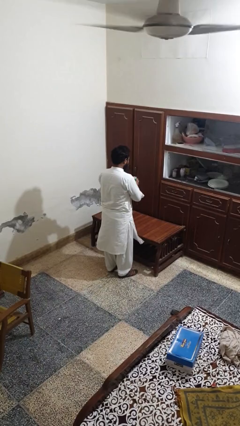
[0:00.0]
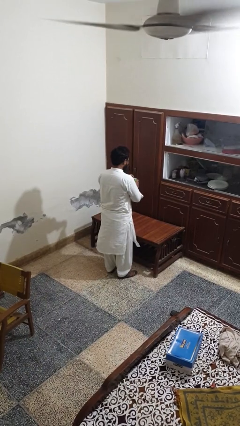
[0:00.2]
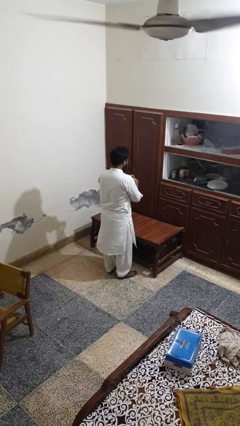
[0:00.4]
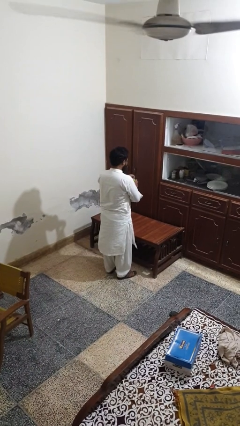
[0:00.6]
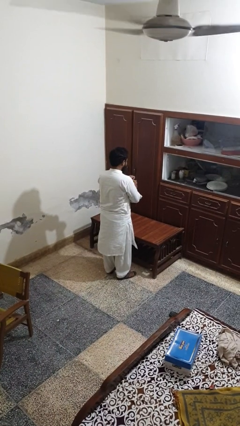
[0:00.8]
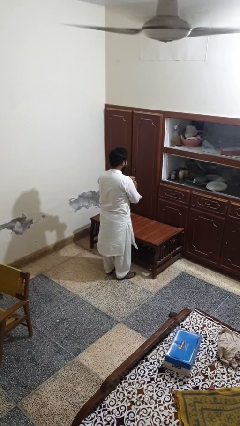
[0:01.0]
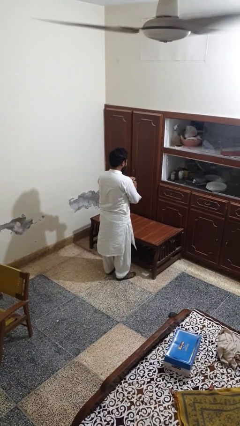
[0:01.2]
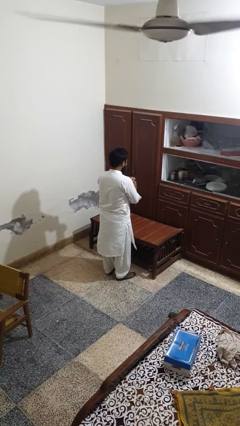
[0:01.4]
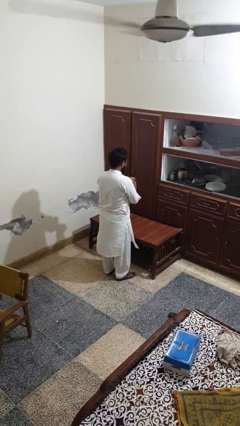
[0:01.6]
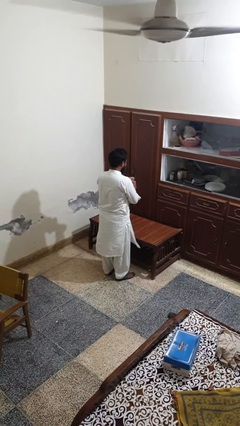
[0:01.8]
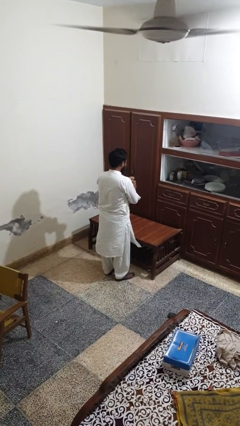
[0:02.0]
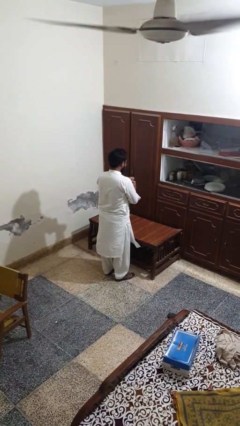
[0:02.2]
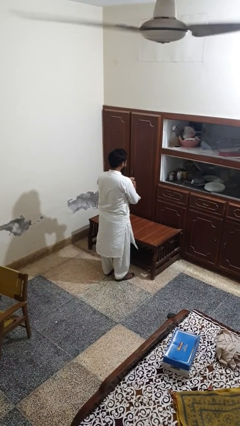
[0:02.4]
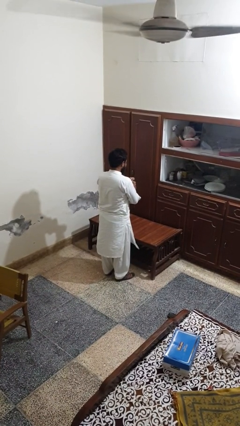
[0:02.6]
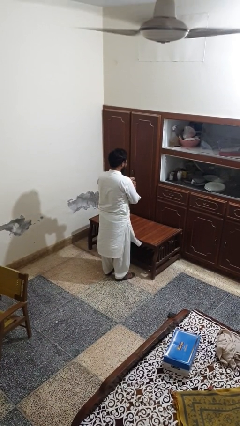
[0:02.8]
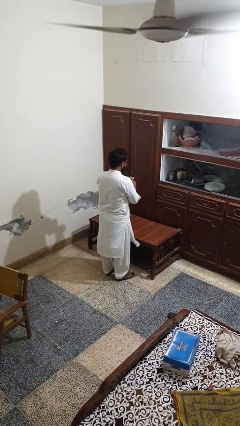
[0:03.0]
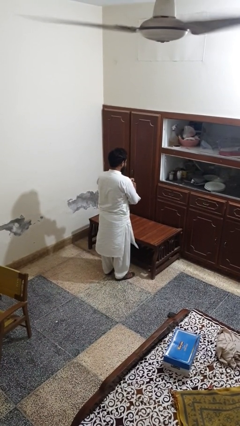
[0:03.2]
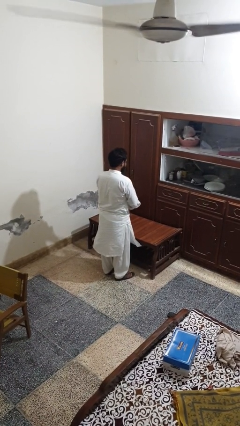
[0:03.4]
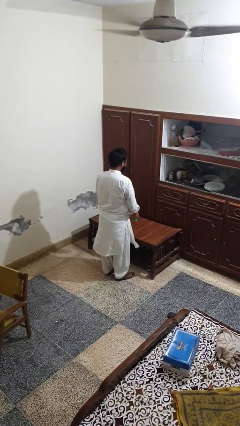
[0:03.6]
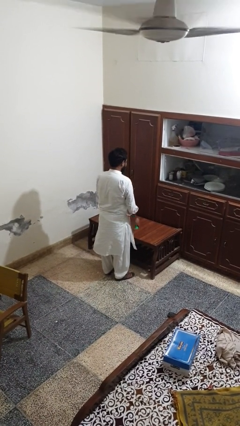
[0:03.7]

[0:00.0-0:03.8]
person opens beverage can

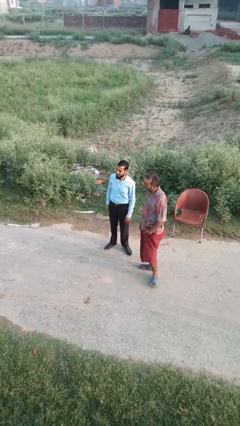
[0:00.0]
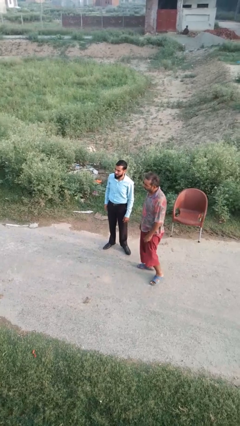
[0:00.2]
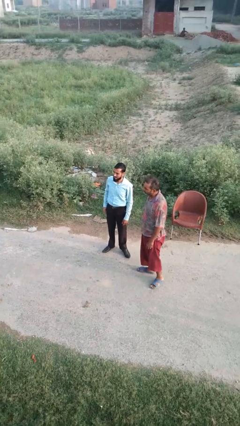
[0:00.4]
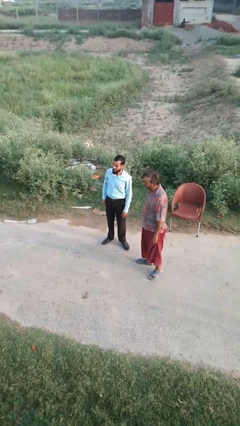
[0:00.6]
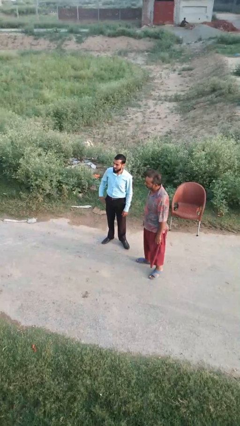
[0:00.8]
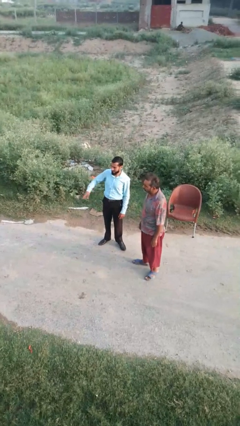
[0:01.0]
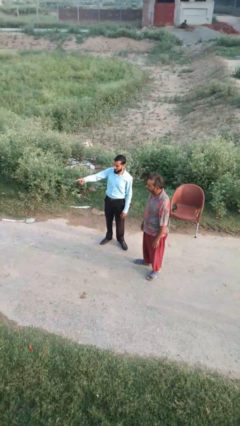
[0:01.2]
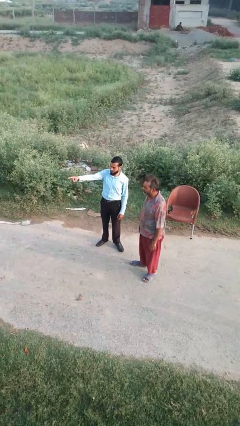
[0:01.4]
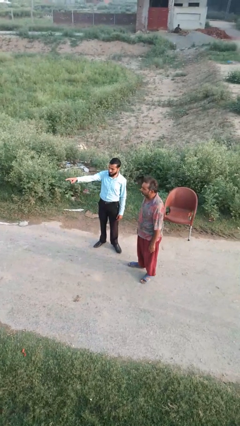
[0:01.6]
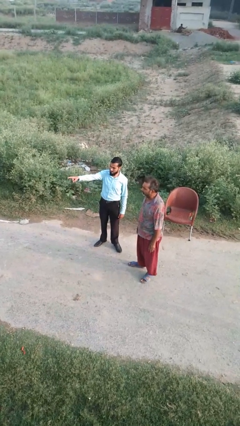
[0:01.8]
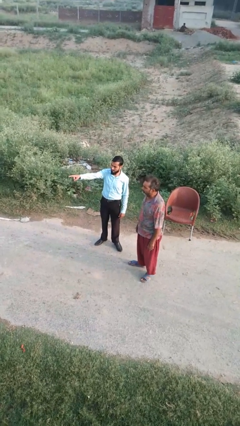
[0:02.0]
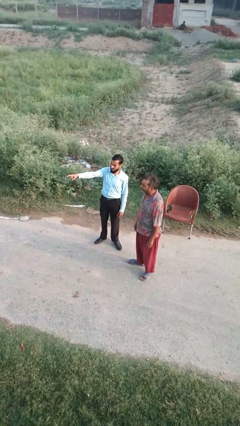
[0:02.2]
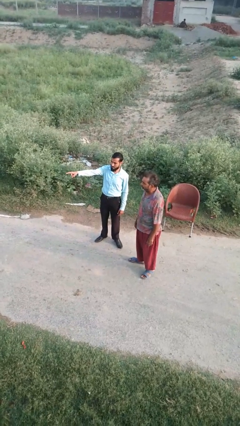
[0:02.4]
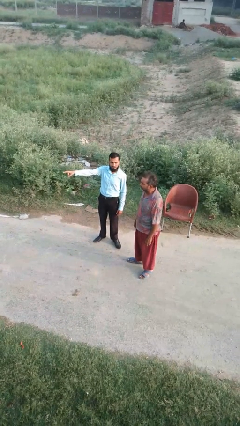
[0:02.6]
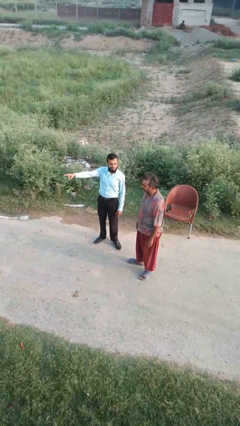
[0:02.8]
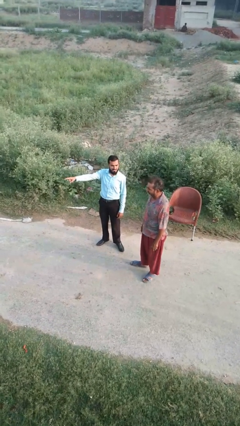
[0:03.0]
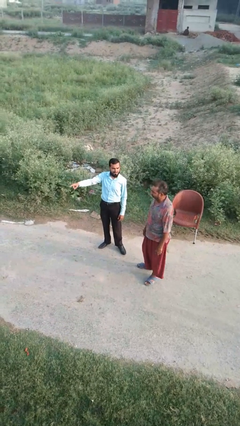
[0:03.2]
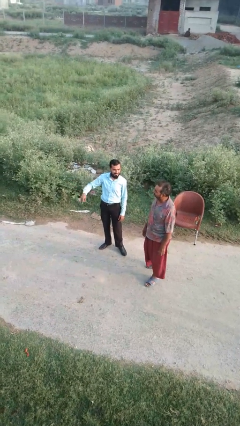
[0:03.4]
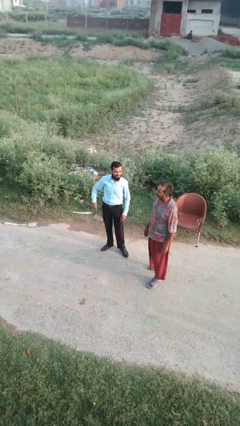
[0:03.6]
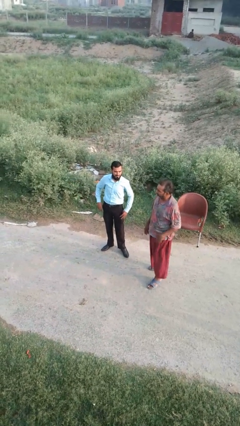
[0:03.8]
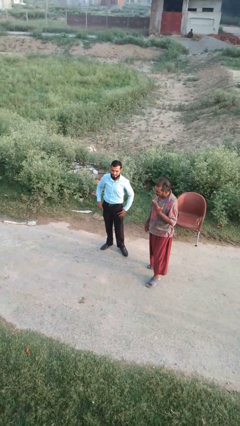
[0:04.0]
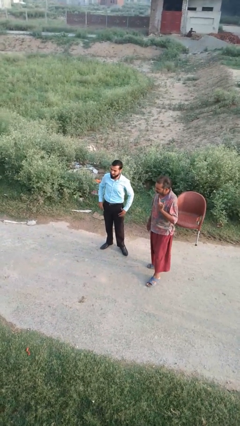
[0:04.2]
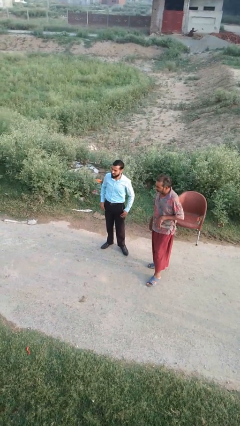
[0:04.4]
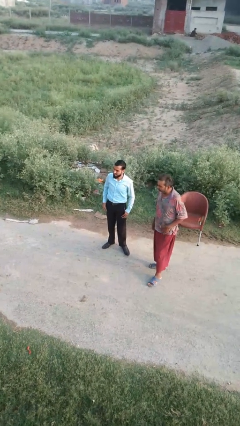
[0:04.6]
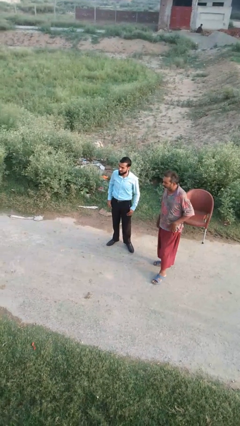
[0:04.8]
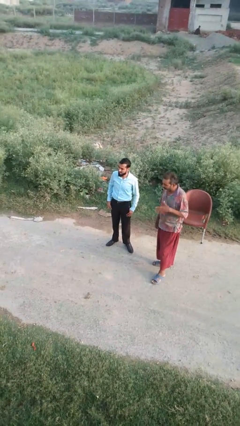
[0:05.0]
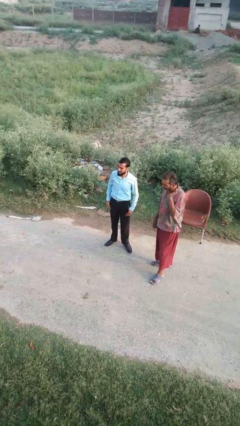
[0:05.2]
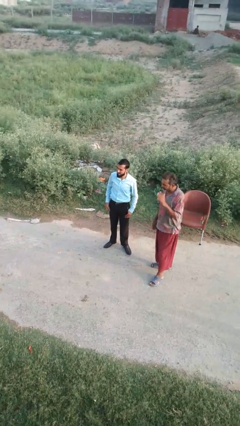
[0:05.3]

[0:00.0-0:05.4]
person points at person

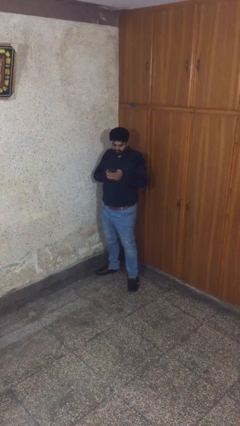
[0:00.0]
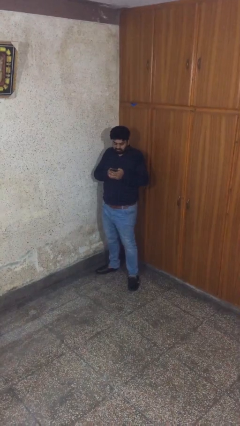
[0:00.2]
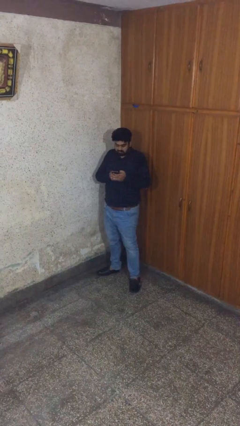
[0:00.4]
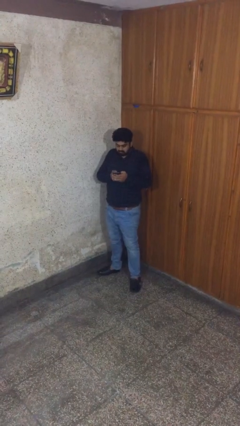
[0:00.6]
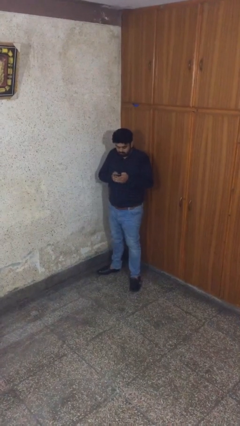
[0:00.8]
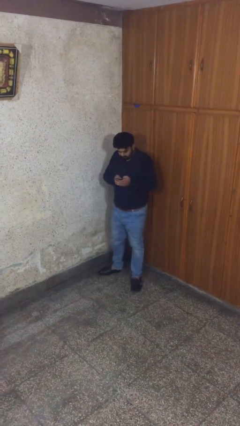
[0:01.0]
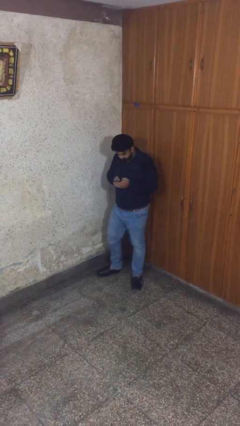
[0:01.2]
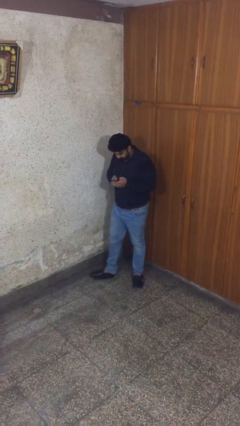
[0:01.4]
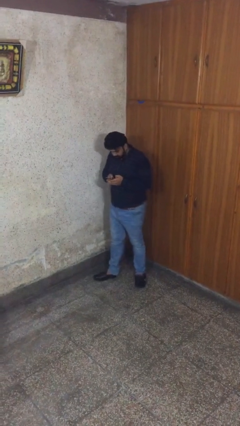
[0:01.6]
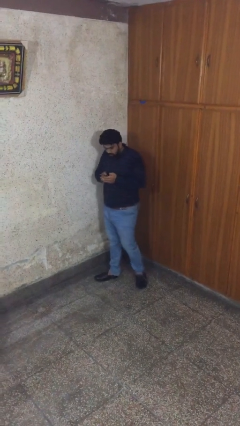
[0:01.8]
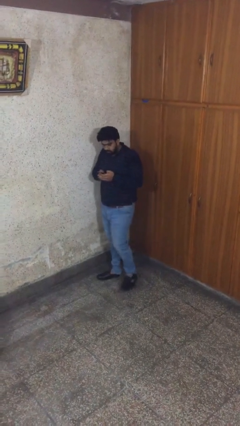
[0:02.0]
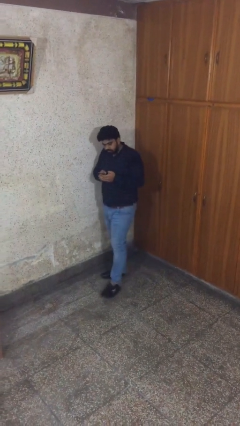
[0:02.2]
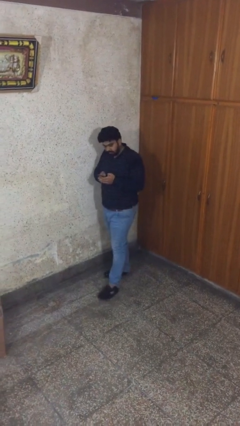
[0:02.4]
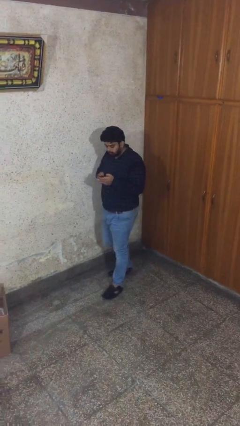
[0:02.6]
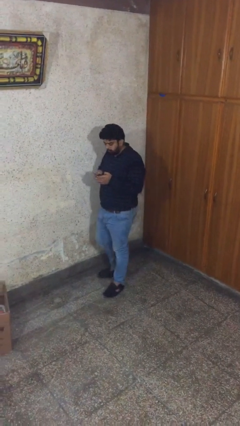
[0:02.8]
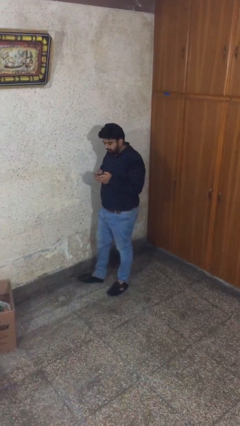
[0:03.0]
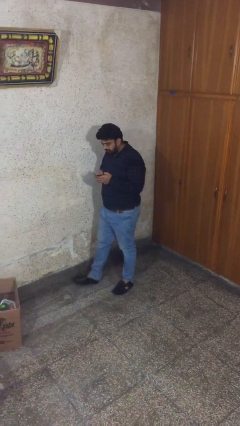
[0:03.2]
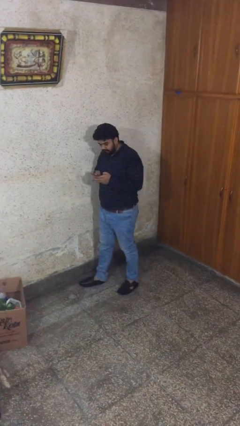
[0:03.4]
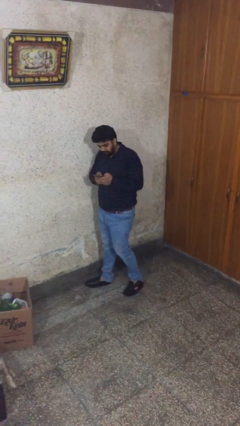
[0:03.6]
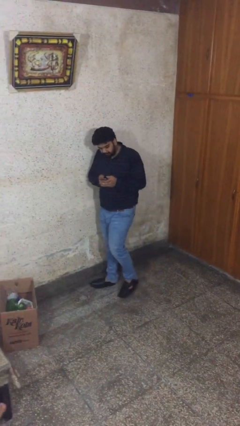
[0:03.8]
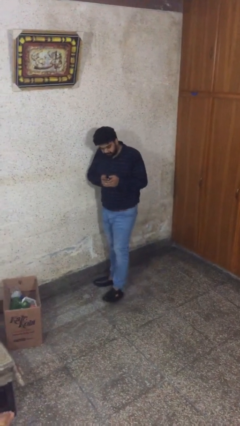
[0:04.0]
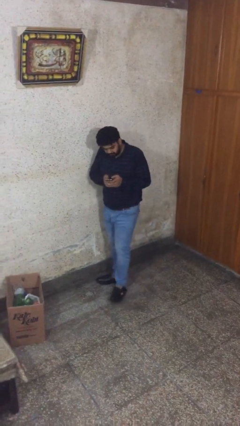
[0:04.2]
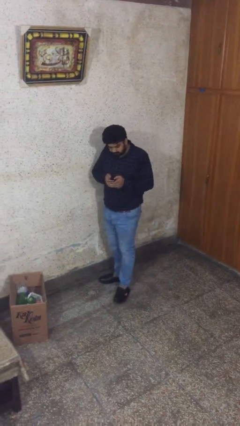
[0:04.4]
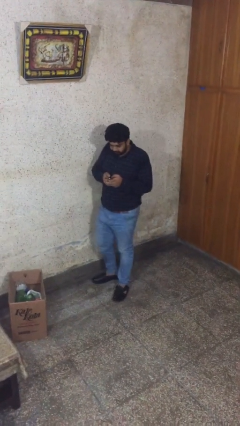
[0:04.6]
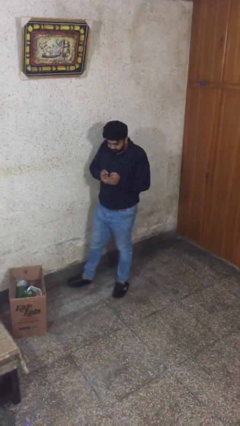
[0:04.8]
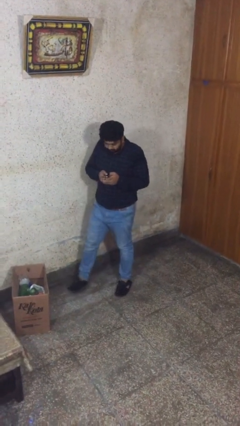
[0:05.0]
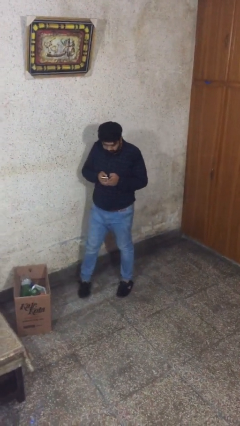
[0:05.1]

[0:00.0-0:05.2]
person texts on phone

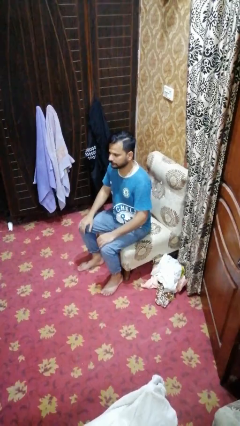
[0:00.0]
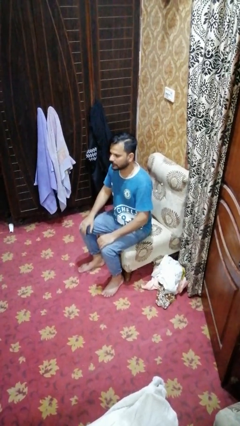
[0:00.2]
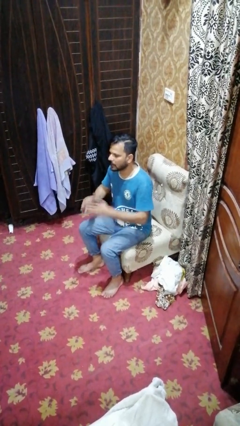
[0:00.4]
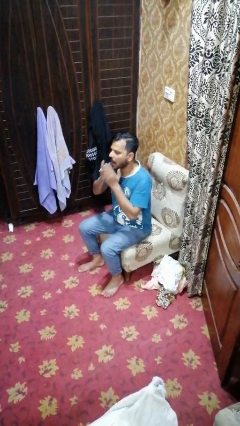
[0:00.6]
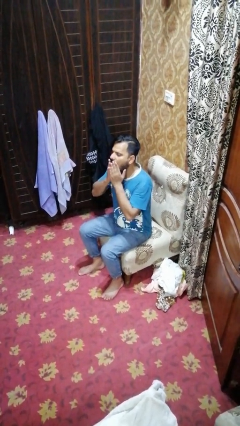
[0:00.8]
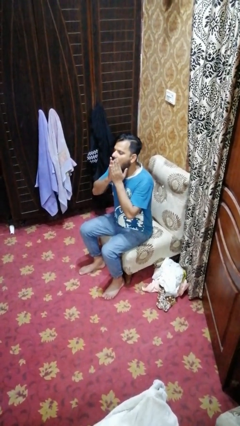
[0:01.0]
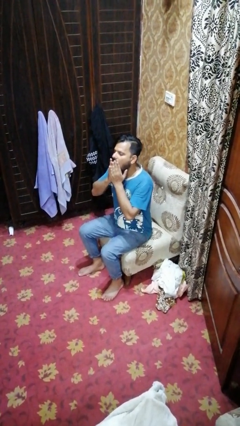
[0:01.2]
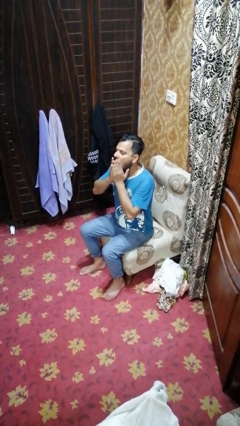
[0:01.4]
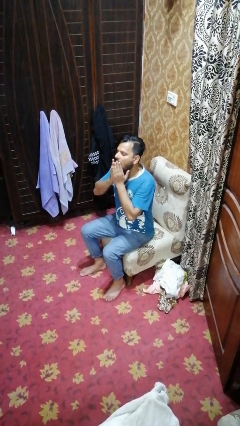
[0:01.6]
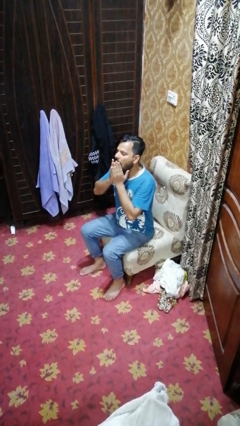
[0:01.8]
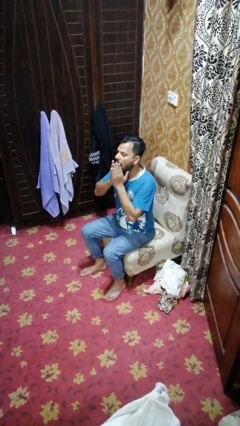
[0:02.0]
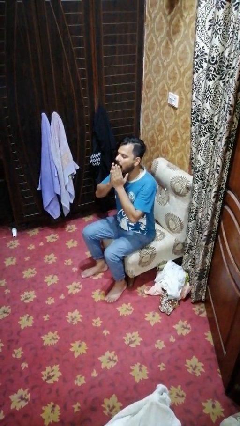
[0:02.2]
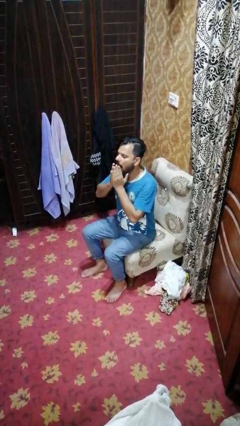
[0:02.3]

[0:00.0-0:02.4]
person yawns

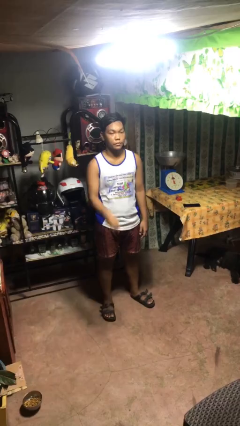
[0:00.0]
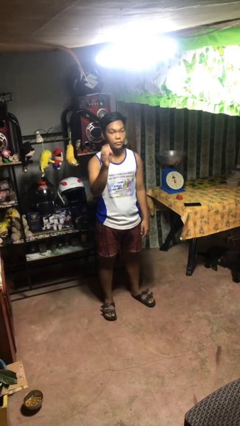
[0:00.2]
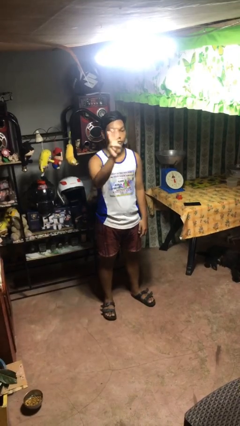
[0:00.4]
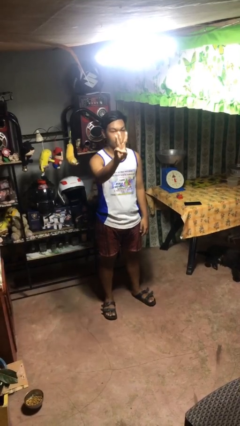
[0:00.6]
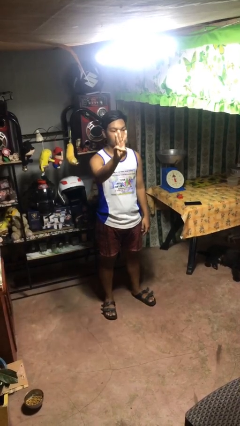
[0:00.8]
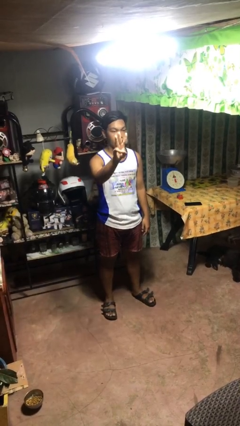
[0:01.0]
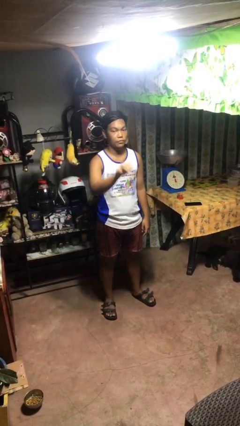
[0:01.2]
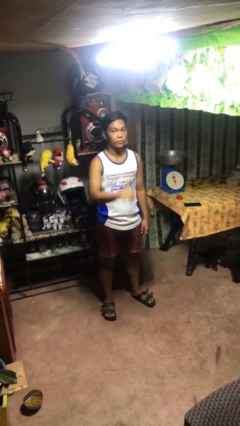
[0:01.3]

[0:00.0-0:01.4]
person gestures number three
